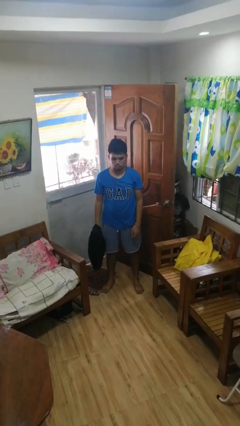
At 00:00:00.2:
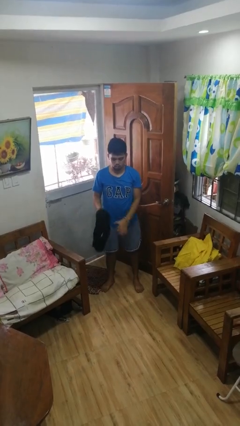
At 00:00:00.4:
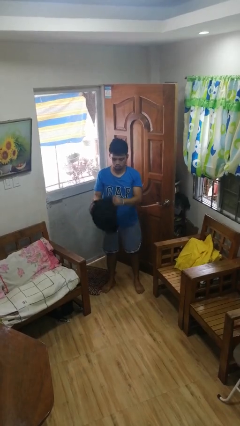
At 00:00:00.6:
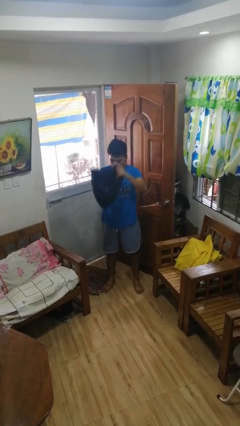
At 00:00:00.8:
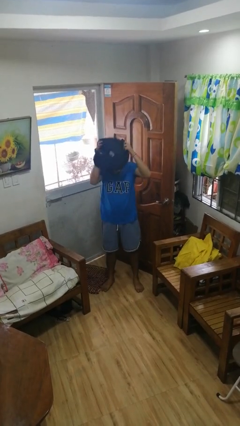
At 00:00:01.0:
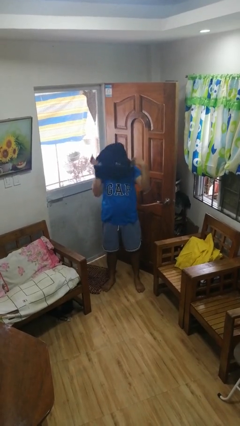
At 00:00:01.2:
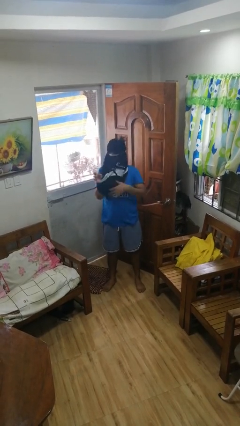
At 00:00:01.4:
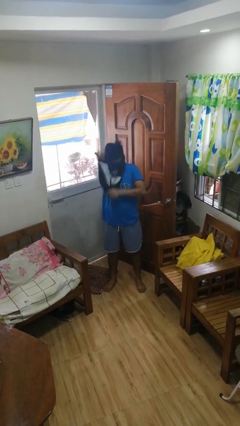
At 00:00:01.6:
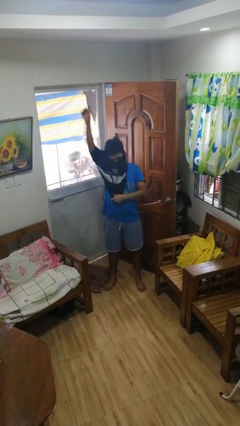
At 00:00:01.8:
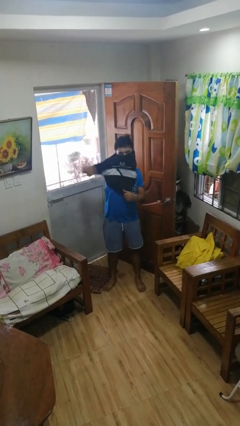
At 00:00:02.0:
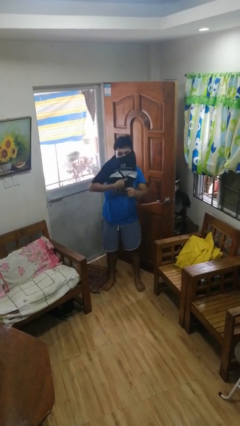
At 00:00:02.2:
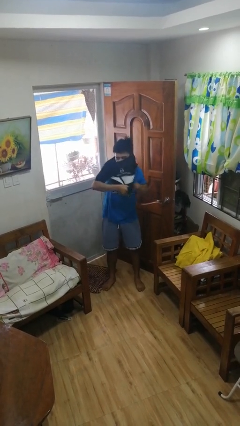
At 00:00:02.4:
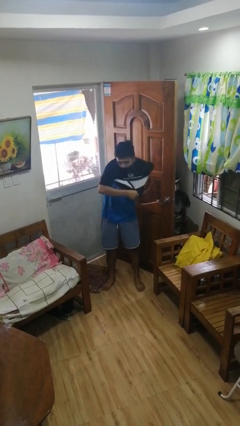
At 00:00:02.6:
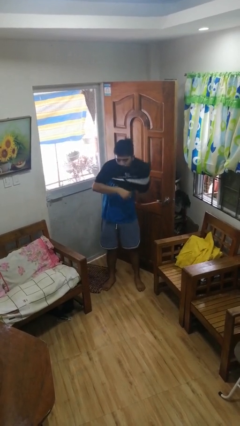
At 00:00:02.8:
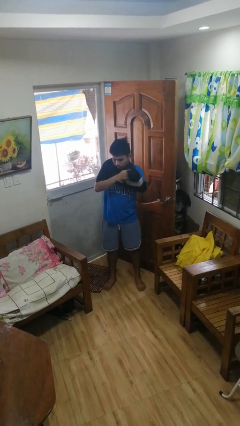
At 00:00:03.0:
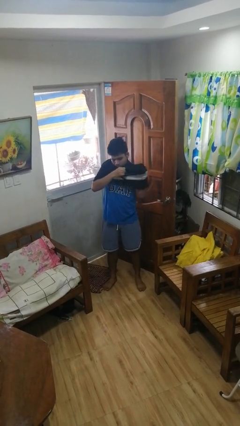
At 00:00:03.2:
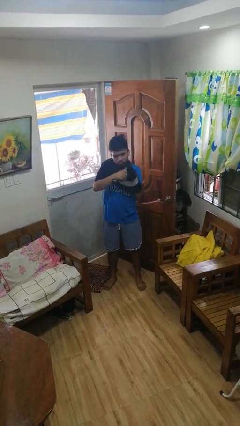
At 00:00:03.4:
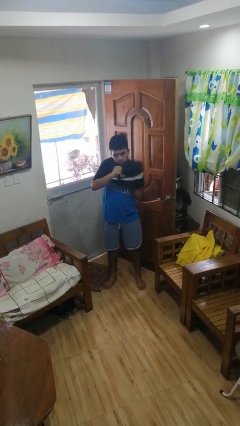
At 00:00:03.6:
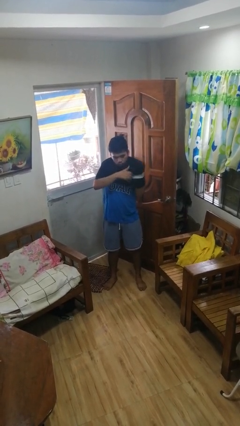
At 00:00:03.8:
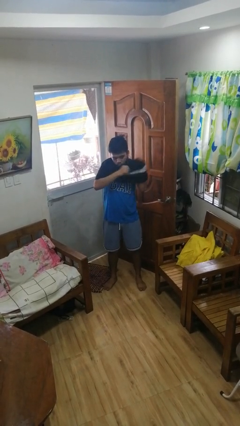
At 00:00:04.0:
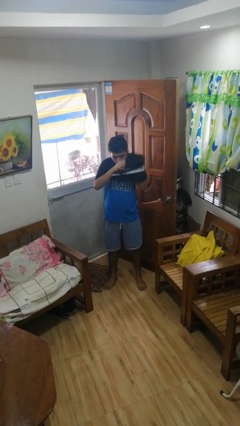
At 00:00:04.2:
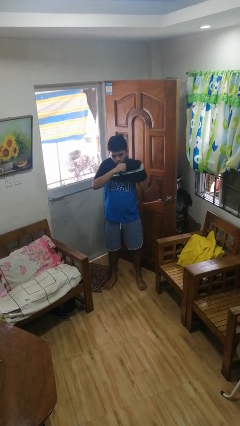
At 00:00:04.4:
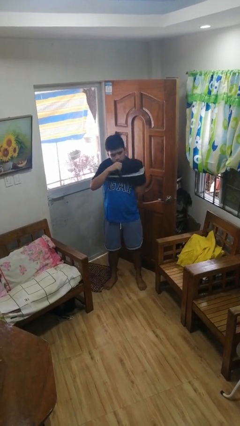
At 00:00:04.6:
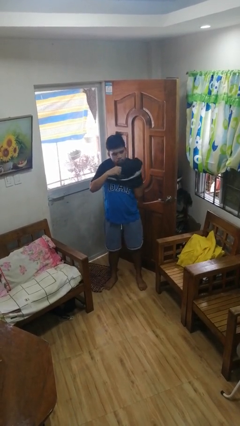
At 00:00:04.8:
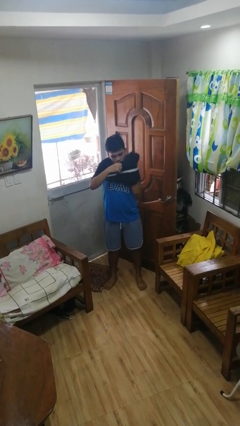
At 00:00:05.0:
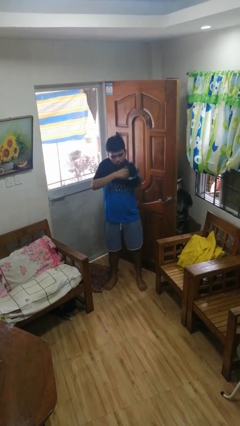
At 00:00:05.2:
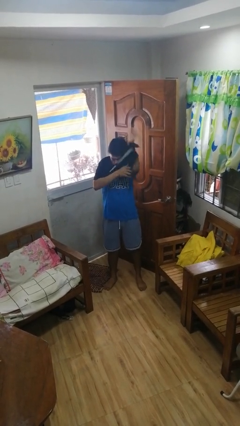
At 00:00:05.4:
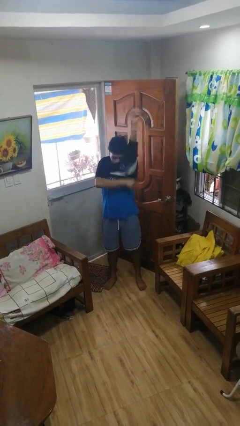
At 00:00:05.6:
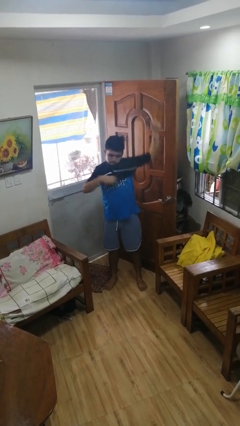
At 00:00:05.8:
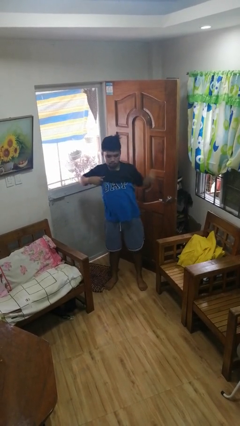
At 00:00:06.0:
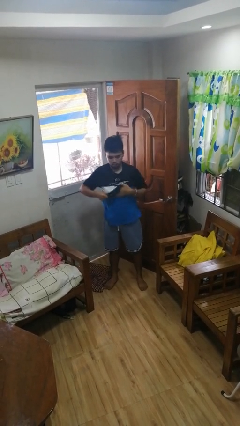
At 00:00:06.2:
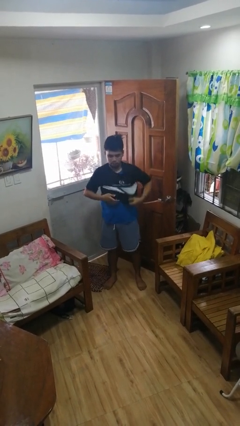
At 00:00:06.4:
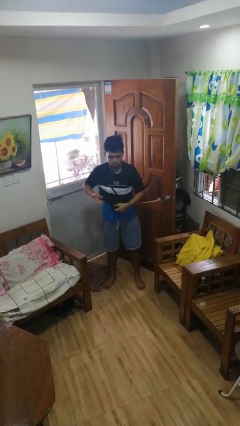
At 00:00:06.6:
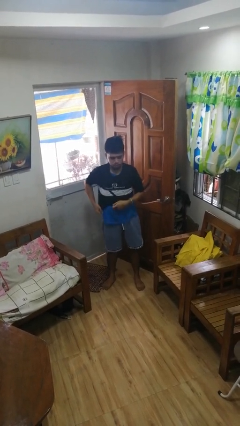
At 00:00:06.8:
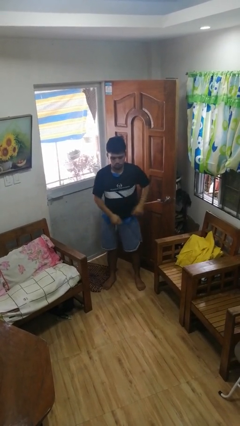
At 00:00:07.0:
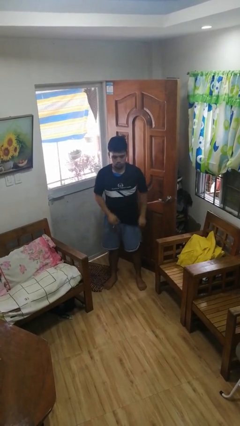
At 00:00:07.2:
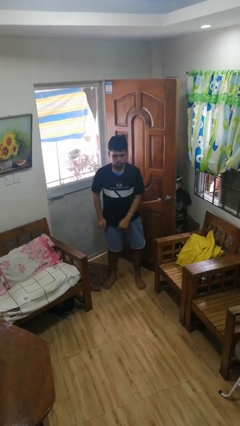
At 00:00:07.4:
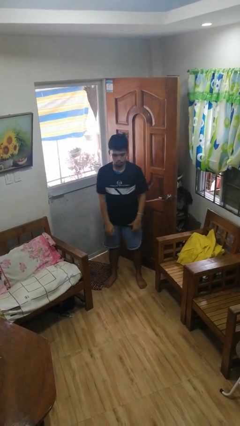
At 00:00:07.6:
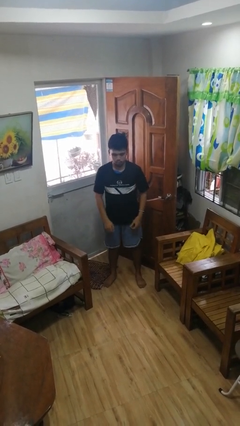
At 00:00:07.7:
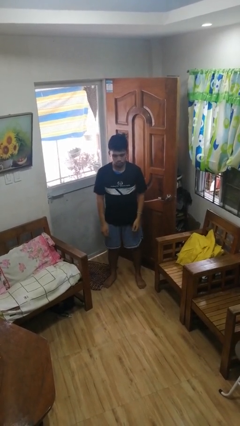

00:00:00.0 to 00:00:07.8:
person puts on shirt

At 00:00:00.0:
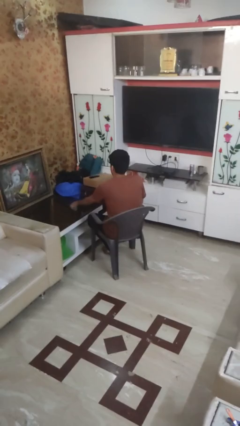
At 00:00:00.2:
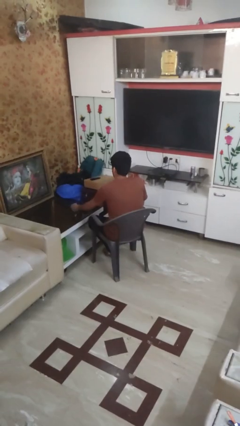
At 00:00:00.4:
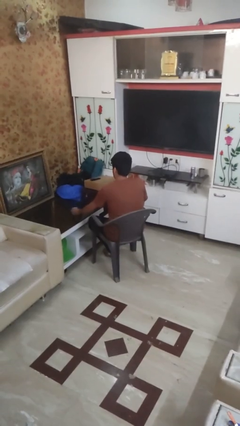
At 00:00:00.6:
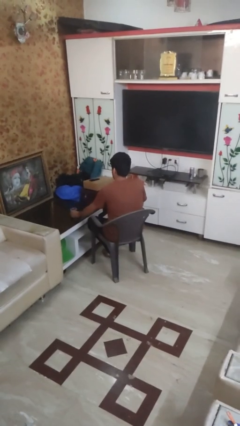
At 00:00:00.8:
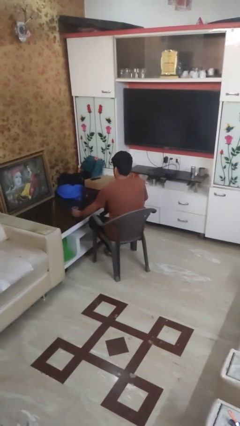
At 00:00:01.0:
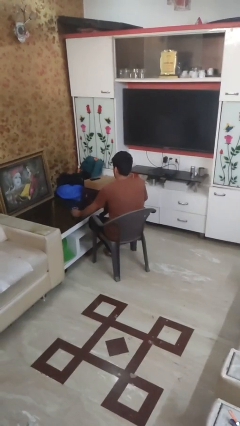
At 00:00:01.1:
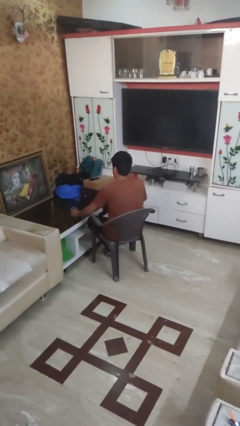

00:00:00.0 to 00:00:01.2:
person sets upright glass

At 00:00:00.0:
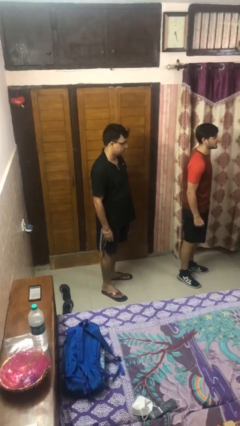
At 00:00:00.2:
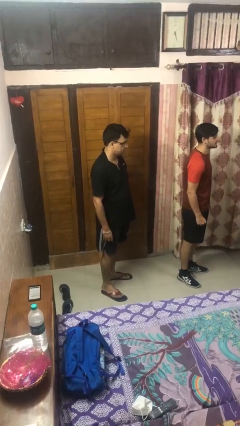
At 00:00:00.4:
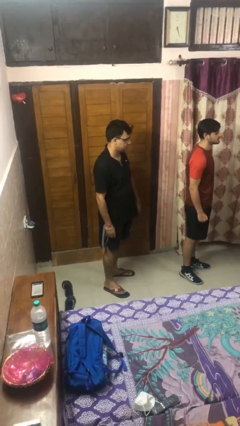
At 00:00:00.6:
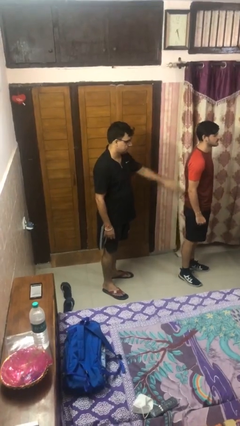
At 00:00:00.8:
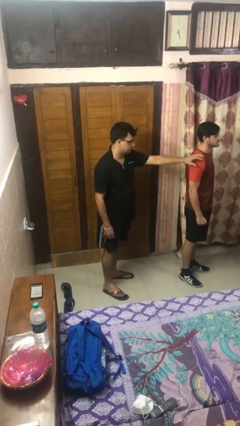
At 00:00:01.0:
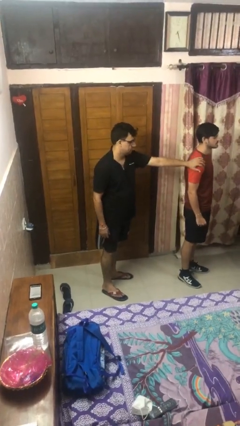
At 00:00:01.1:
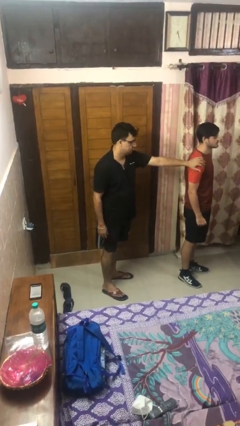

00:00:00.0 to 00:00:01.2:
person grabs person by shoulder

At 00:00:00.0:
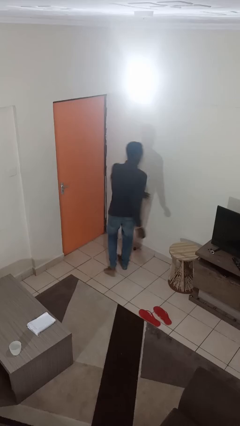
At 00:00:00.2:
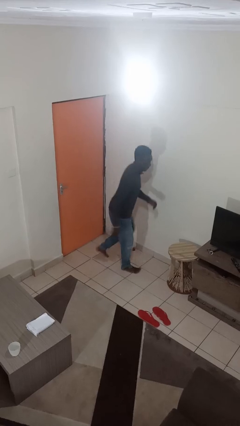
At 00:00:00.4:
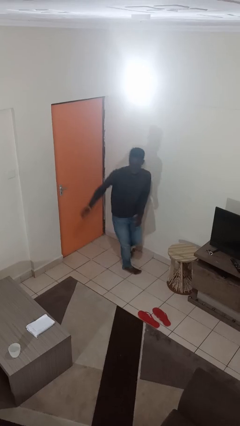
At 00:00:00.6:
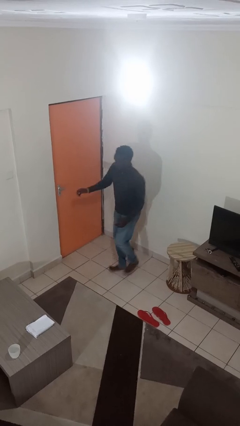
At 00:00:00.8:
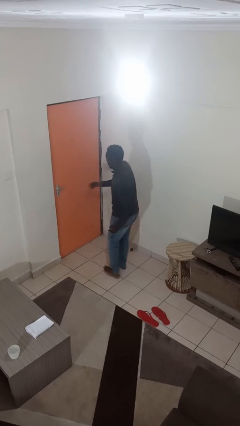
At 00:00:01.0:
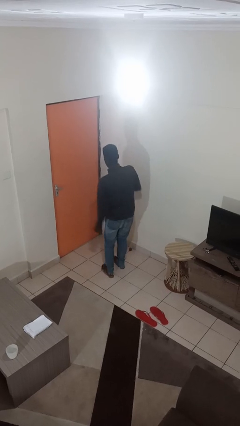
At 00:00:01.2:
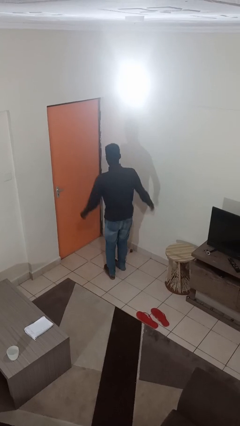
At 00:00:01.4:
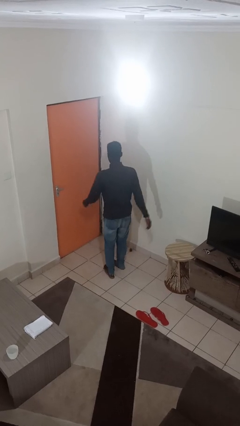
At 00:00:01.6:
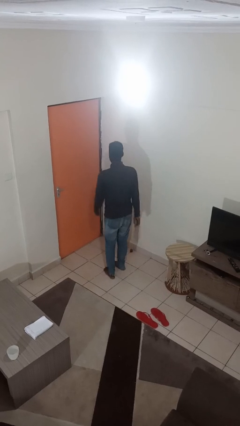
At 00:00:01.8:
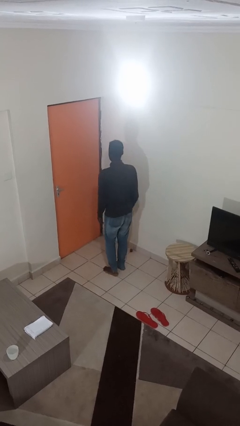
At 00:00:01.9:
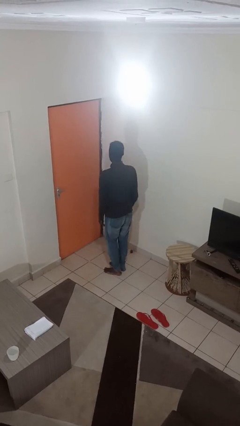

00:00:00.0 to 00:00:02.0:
person twirls

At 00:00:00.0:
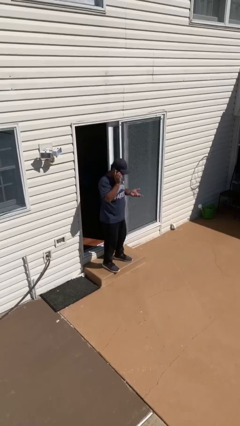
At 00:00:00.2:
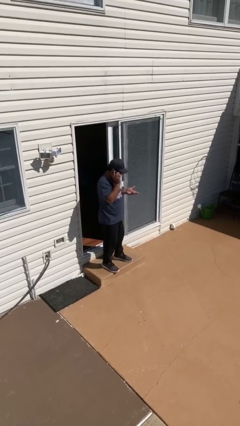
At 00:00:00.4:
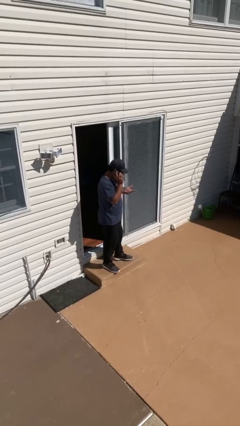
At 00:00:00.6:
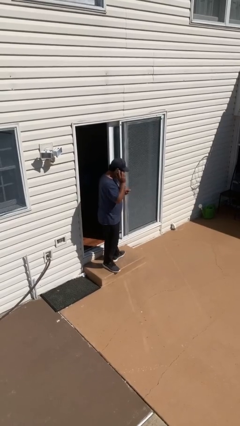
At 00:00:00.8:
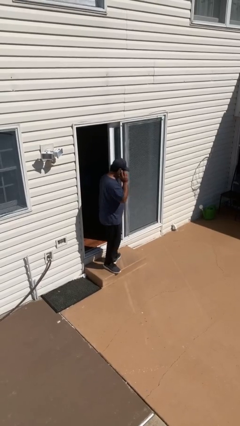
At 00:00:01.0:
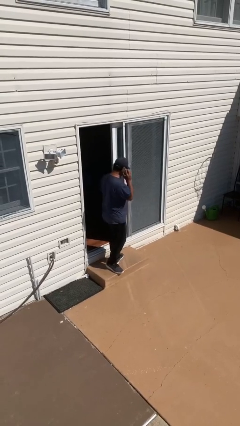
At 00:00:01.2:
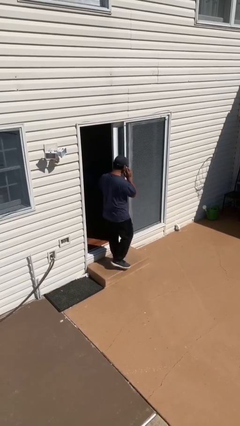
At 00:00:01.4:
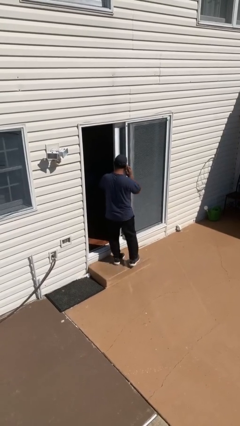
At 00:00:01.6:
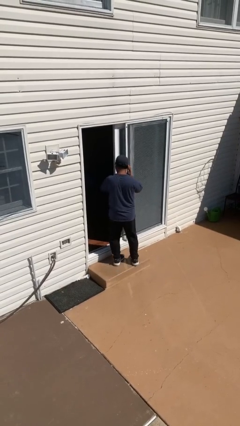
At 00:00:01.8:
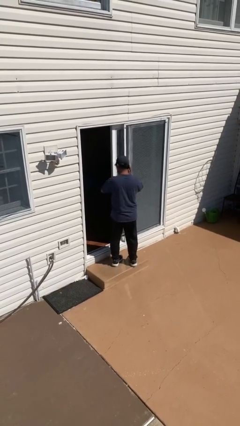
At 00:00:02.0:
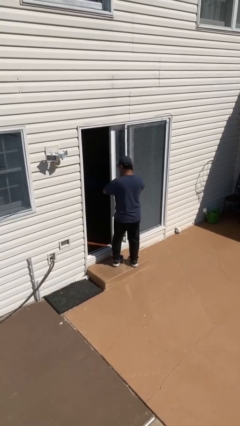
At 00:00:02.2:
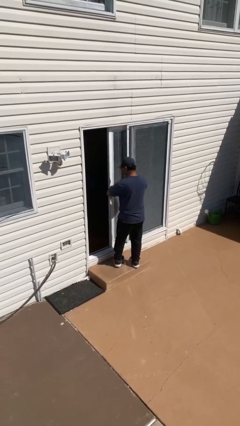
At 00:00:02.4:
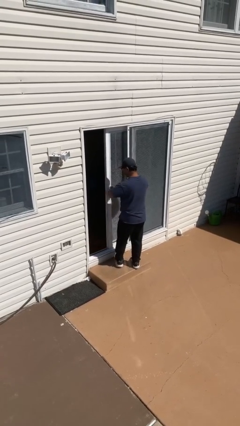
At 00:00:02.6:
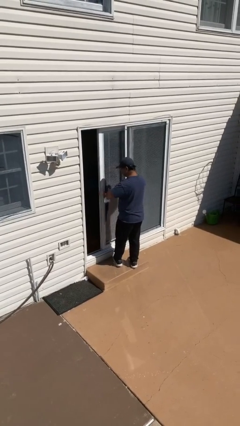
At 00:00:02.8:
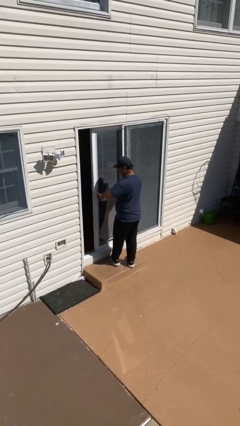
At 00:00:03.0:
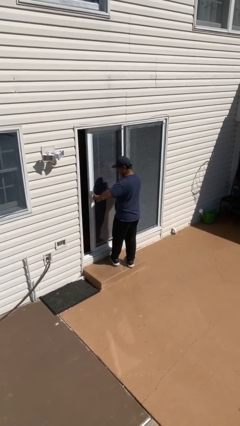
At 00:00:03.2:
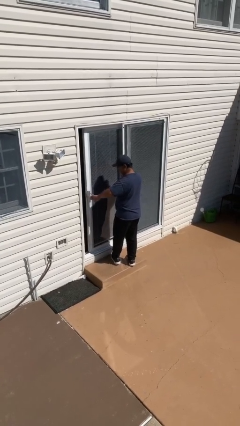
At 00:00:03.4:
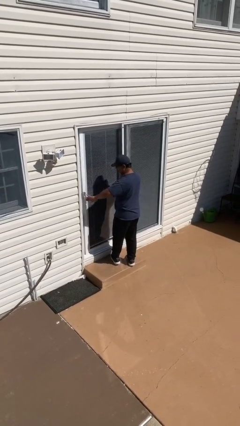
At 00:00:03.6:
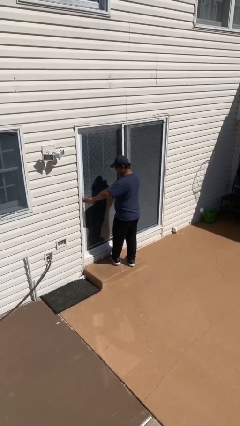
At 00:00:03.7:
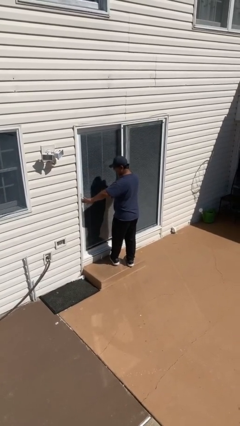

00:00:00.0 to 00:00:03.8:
person closes facility door

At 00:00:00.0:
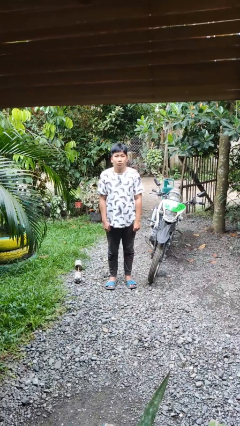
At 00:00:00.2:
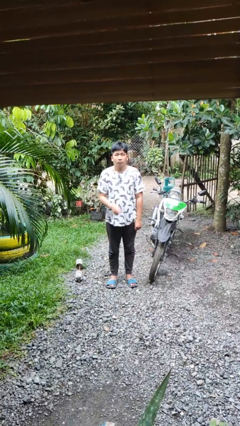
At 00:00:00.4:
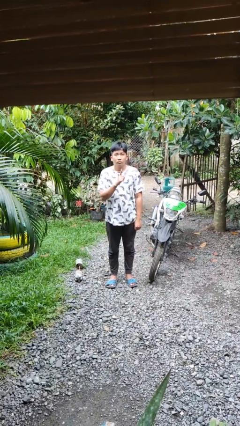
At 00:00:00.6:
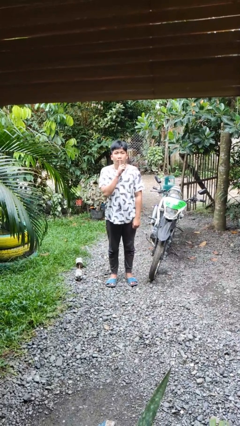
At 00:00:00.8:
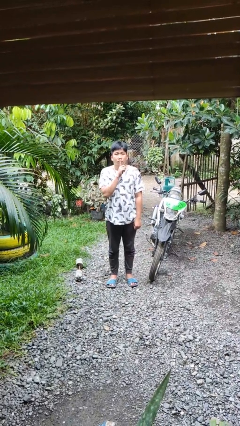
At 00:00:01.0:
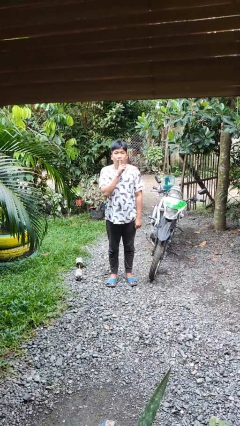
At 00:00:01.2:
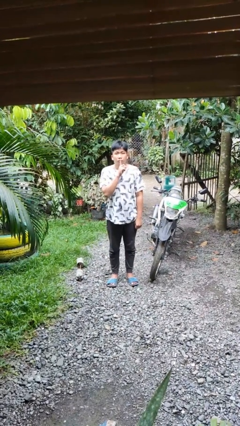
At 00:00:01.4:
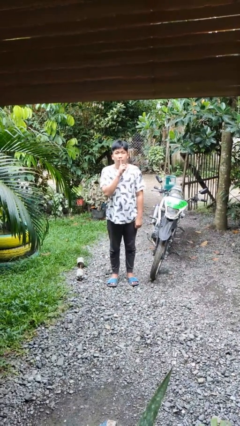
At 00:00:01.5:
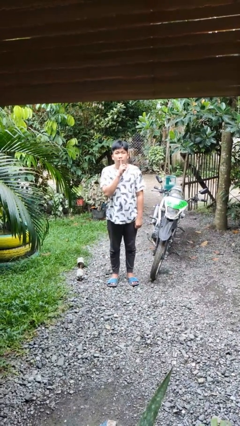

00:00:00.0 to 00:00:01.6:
person gestures be quiet
